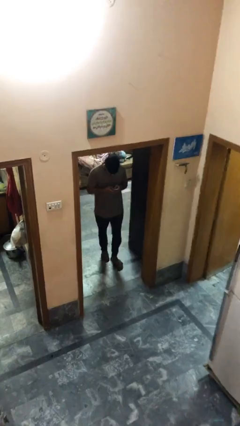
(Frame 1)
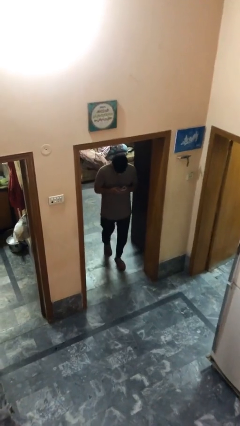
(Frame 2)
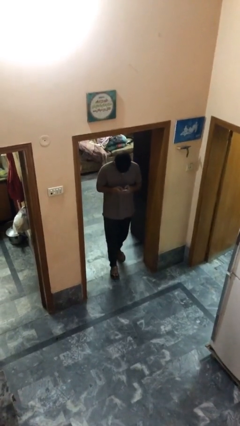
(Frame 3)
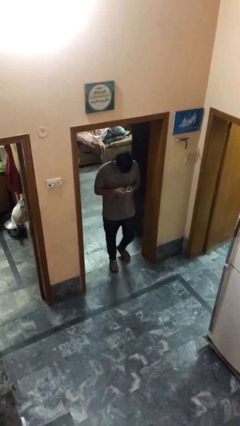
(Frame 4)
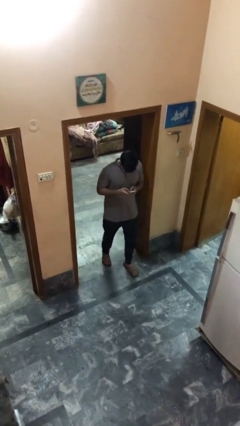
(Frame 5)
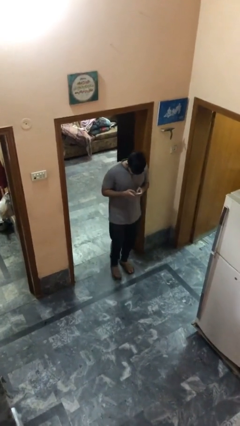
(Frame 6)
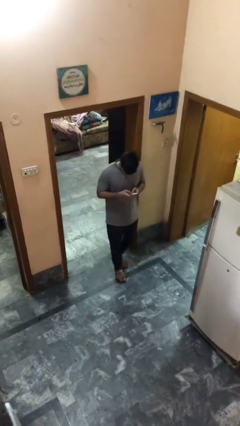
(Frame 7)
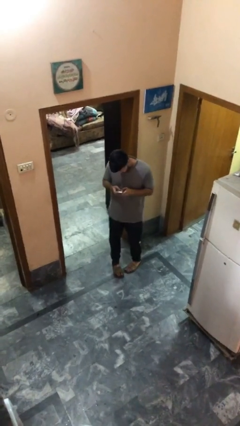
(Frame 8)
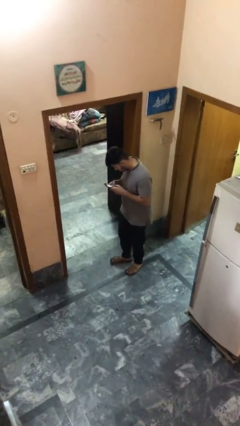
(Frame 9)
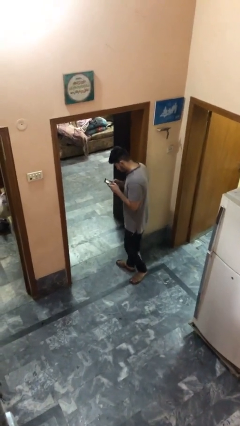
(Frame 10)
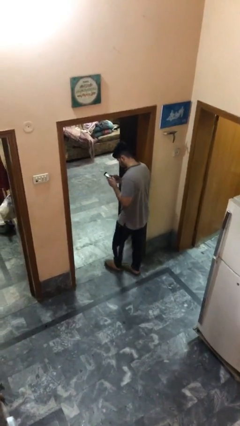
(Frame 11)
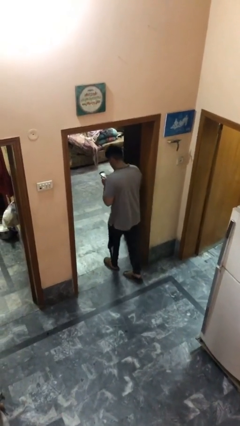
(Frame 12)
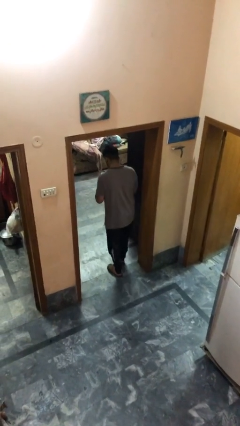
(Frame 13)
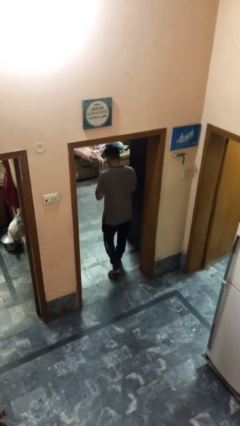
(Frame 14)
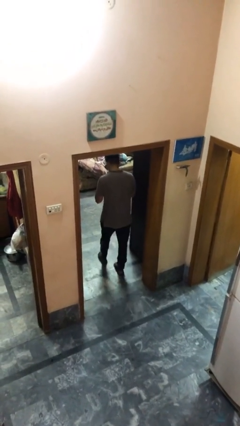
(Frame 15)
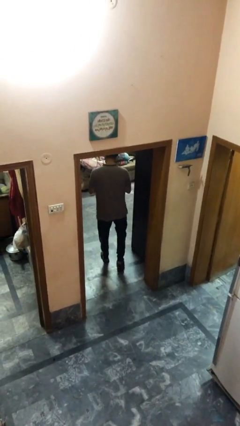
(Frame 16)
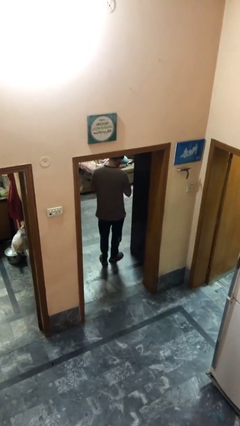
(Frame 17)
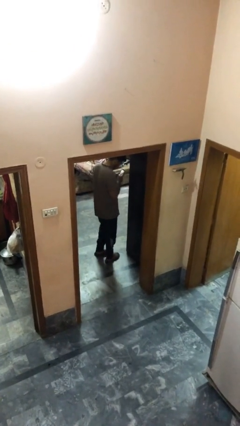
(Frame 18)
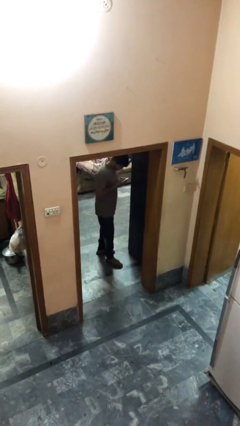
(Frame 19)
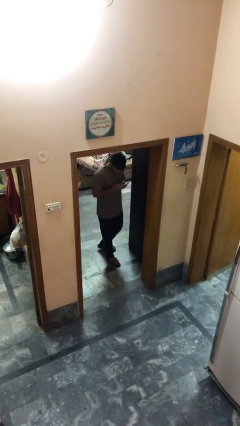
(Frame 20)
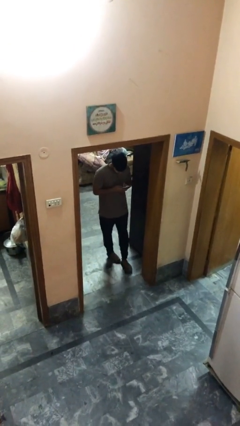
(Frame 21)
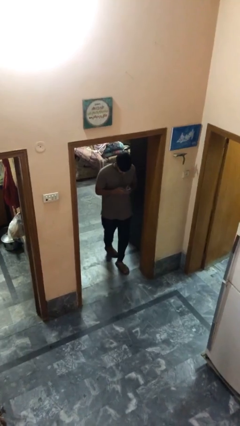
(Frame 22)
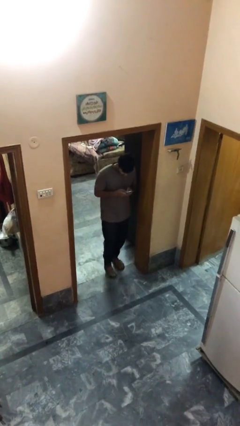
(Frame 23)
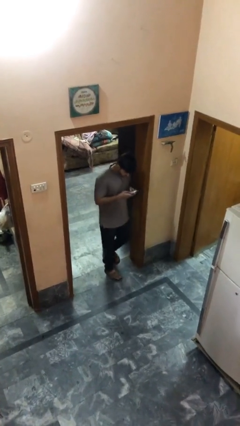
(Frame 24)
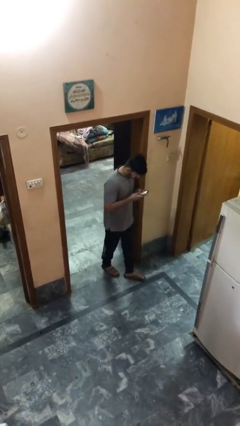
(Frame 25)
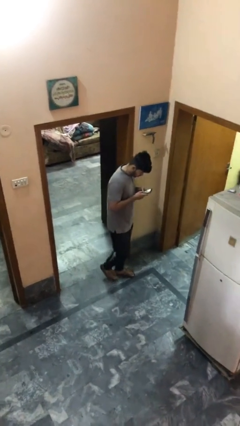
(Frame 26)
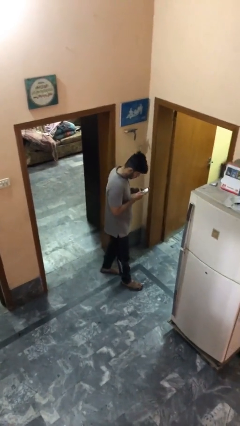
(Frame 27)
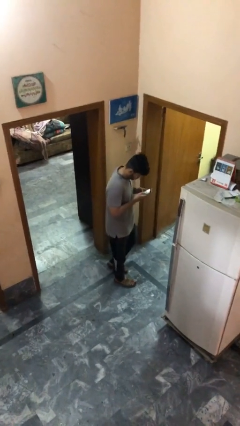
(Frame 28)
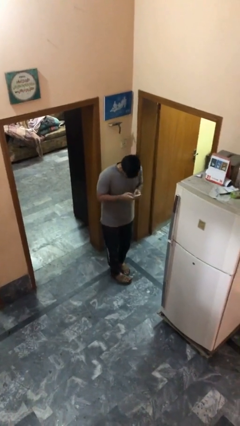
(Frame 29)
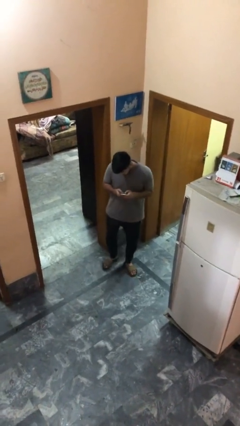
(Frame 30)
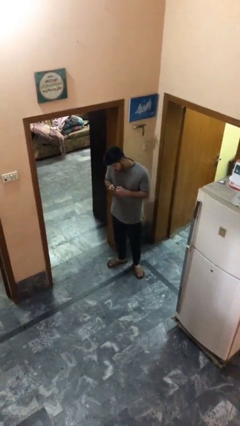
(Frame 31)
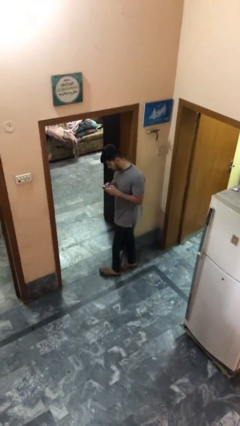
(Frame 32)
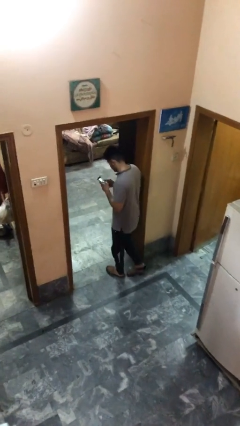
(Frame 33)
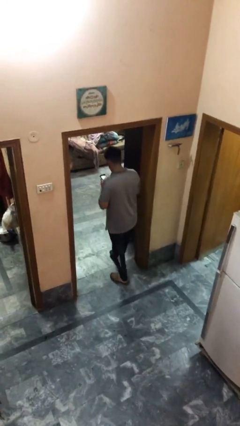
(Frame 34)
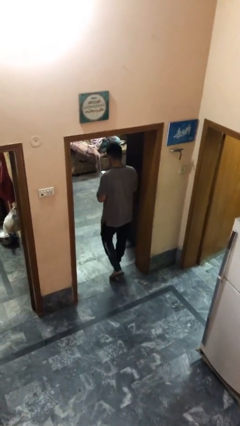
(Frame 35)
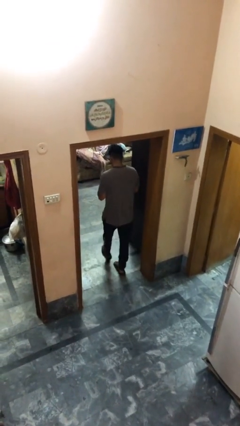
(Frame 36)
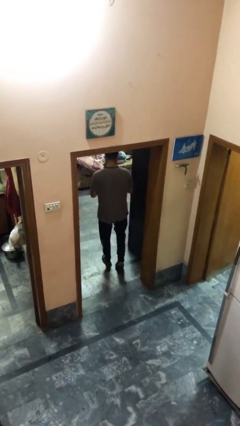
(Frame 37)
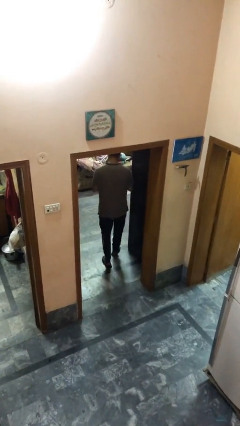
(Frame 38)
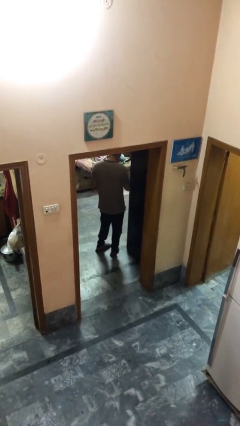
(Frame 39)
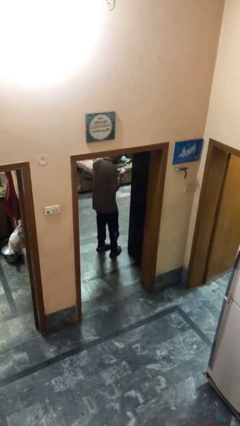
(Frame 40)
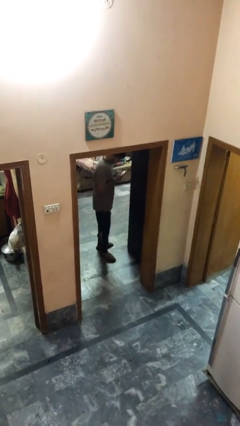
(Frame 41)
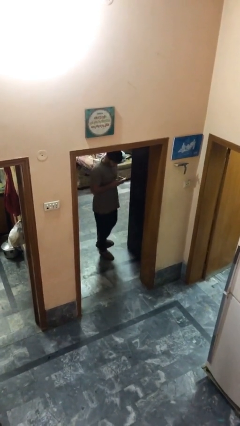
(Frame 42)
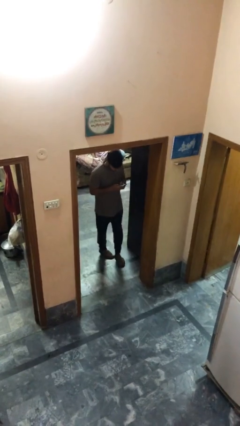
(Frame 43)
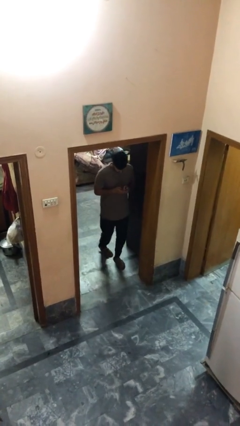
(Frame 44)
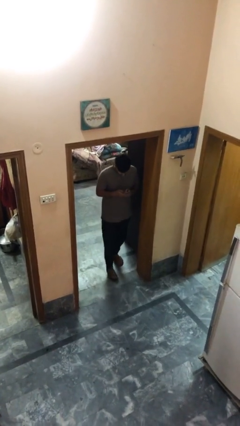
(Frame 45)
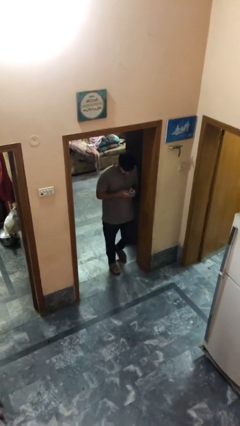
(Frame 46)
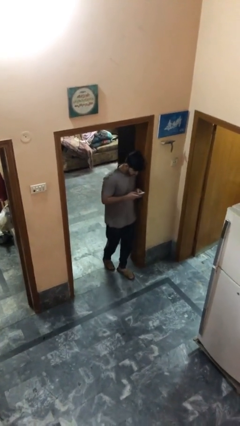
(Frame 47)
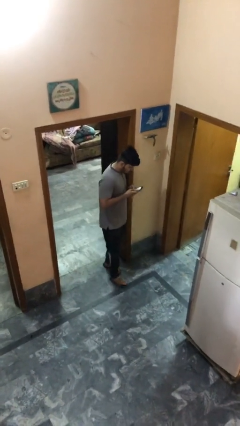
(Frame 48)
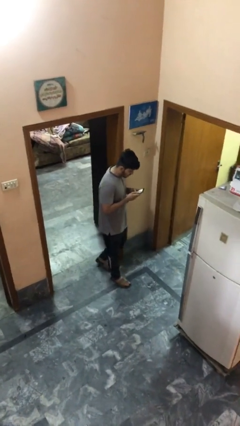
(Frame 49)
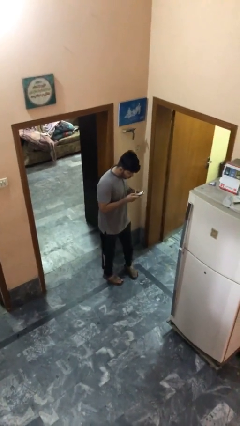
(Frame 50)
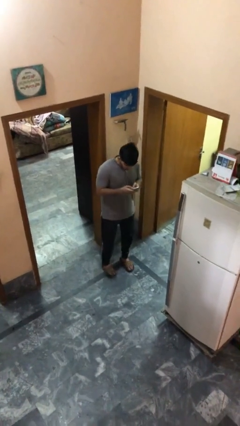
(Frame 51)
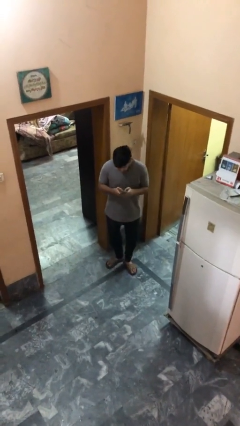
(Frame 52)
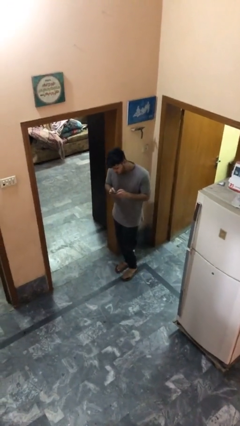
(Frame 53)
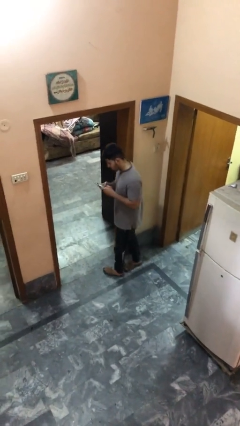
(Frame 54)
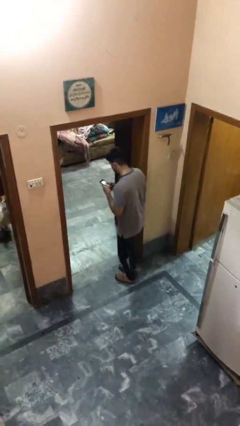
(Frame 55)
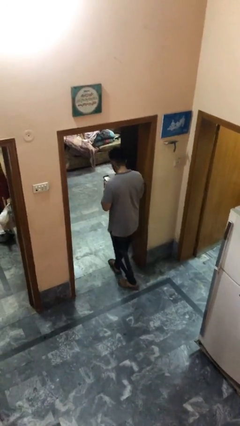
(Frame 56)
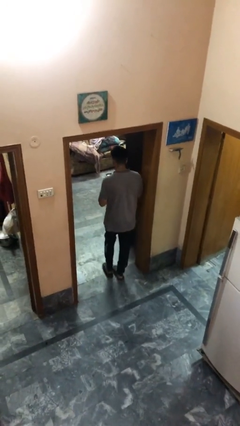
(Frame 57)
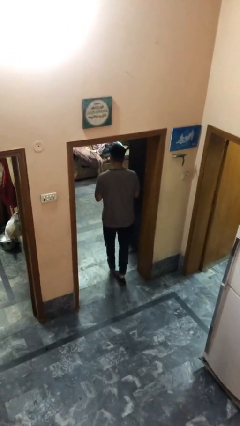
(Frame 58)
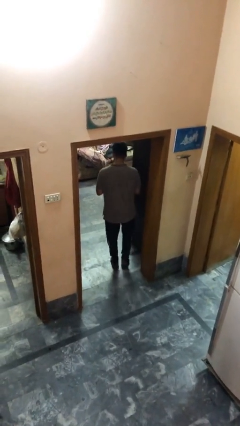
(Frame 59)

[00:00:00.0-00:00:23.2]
person texts on phone

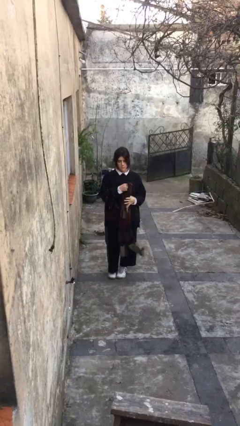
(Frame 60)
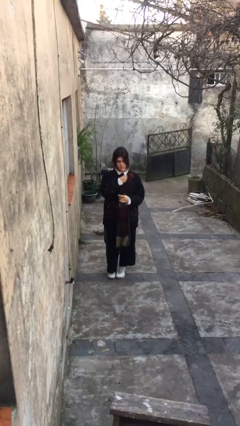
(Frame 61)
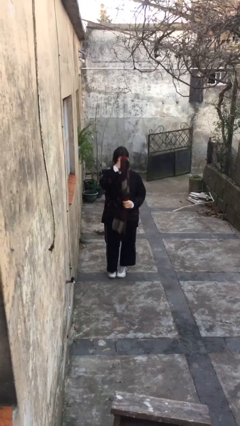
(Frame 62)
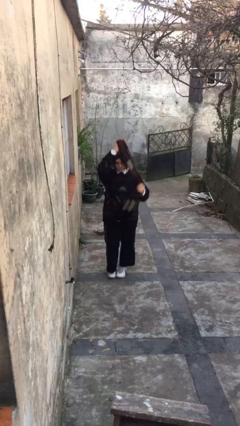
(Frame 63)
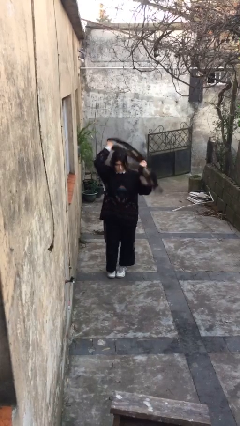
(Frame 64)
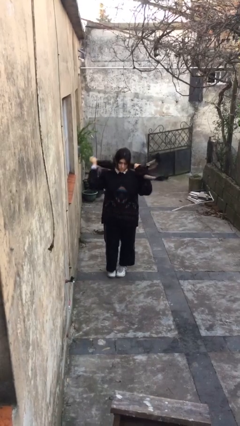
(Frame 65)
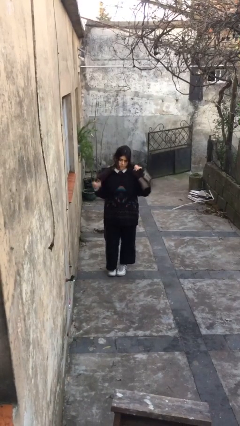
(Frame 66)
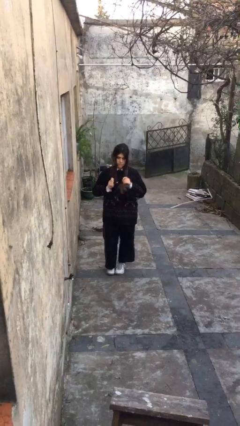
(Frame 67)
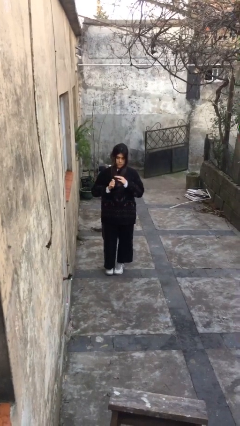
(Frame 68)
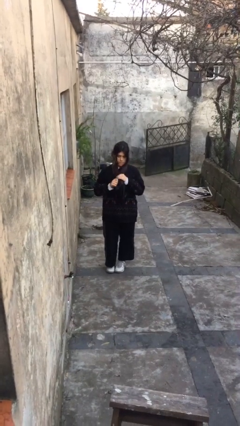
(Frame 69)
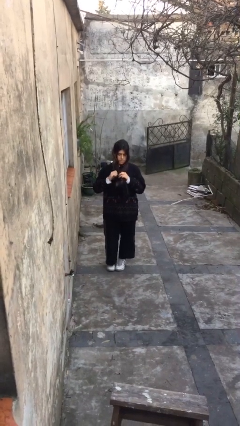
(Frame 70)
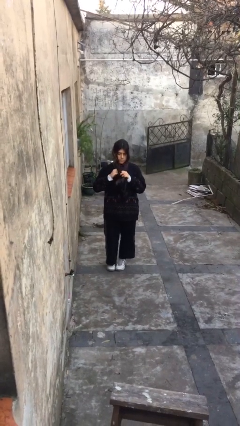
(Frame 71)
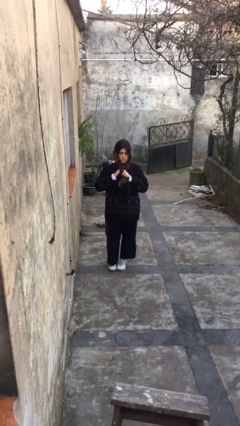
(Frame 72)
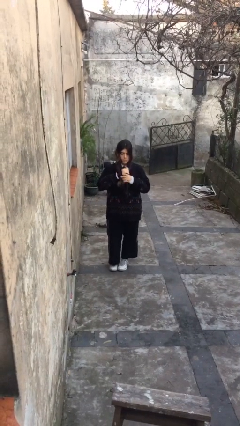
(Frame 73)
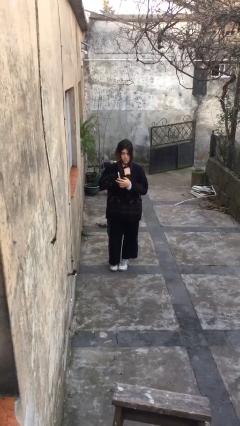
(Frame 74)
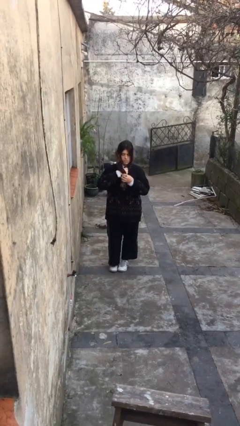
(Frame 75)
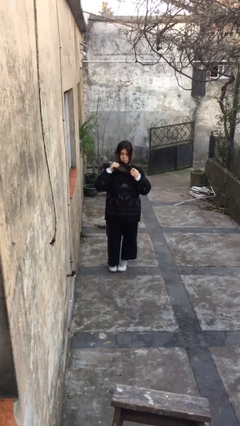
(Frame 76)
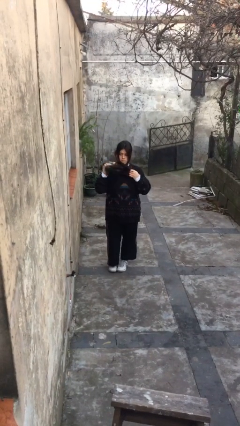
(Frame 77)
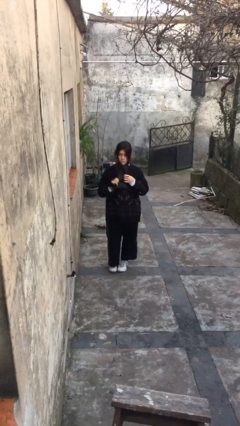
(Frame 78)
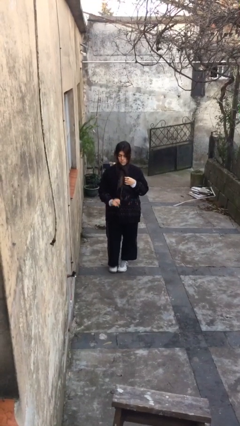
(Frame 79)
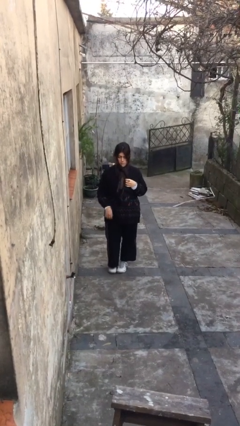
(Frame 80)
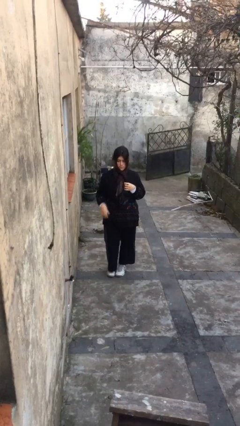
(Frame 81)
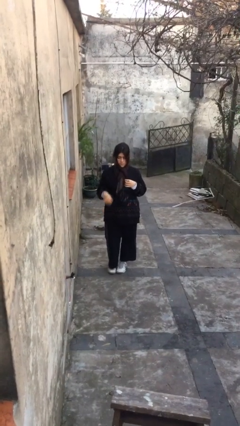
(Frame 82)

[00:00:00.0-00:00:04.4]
person puts on scarf

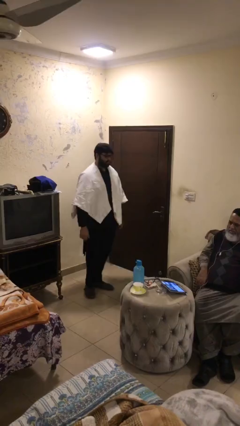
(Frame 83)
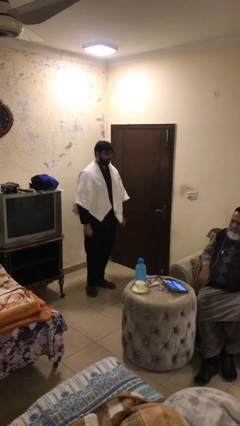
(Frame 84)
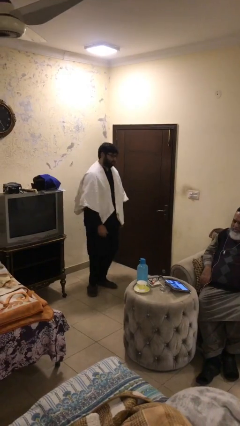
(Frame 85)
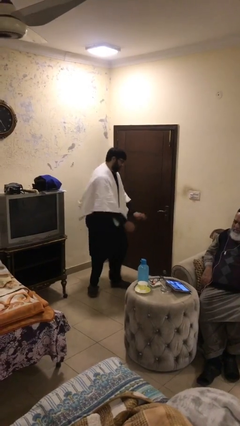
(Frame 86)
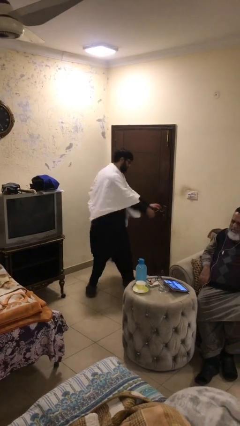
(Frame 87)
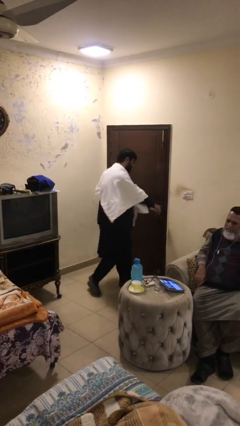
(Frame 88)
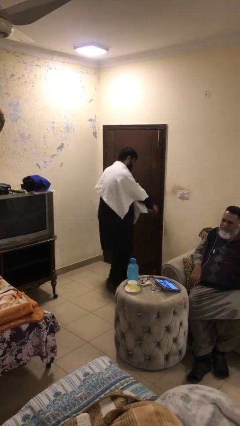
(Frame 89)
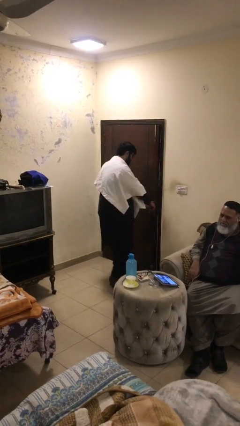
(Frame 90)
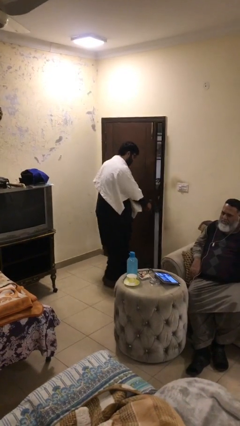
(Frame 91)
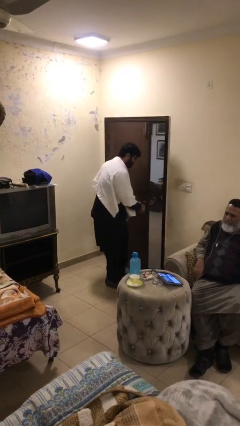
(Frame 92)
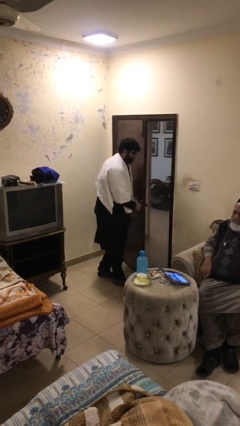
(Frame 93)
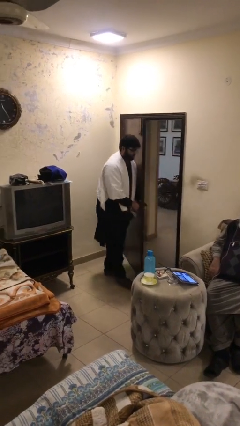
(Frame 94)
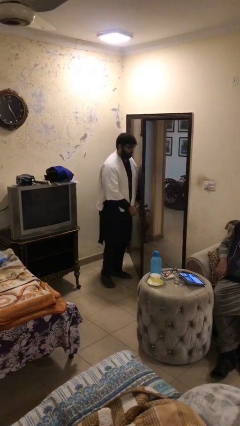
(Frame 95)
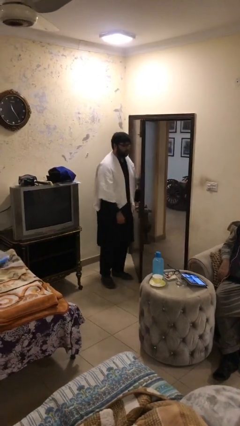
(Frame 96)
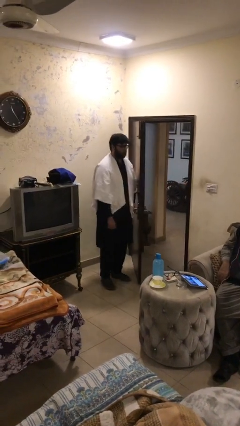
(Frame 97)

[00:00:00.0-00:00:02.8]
person opens facility door
